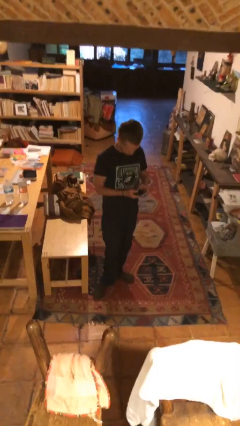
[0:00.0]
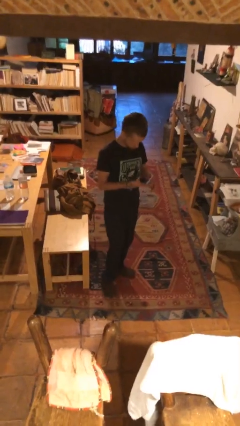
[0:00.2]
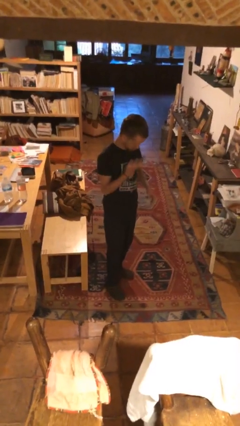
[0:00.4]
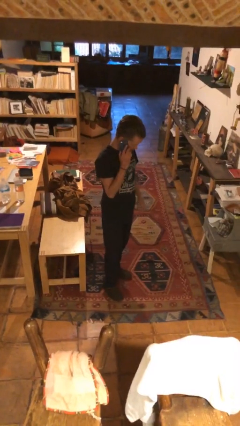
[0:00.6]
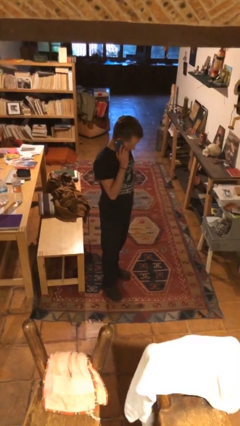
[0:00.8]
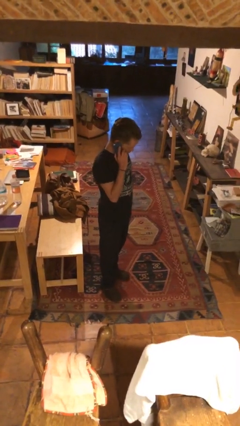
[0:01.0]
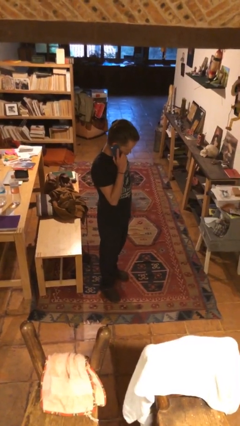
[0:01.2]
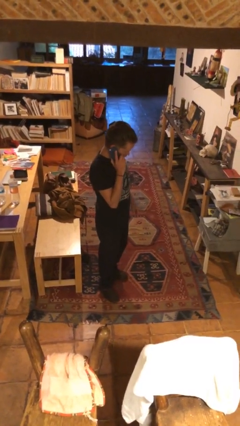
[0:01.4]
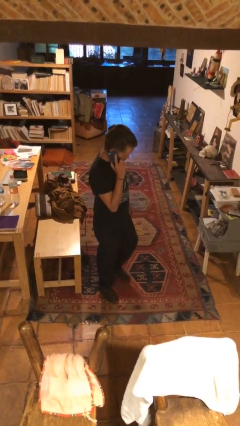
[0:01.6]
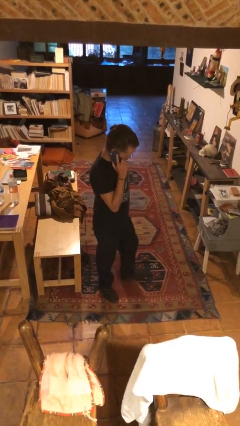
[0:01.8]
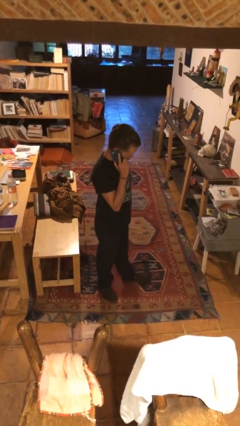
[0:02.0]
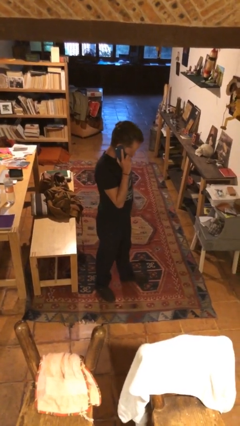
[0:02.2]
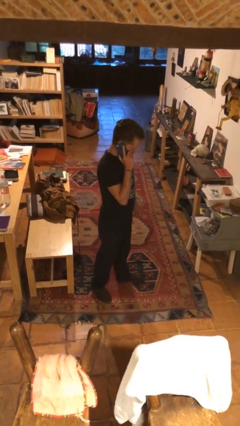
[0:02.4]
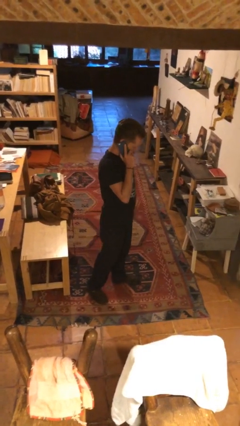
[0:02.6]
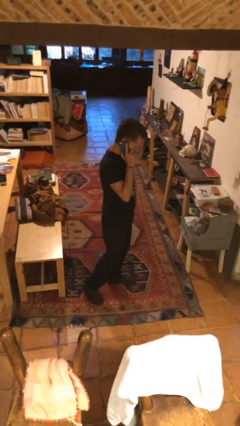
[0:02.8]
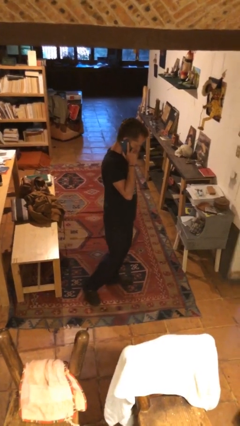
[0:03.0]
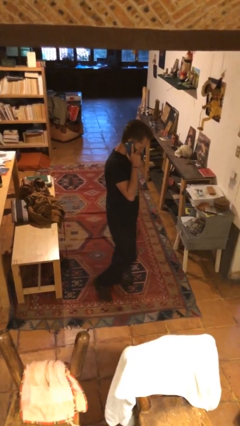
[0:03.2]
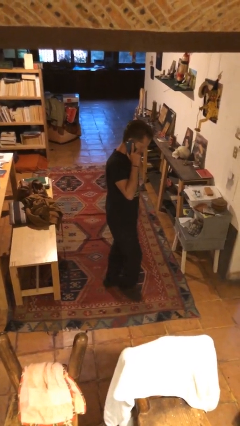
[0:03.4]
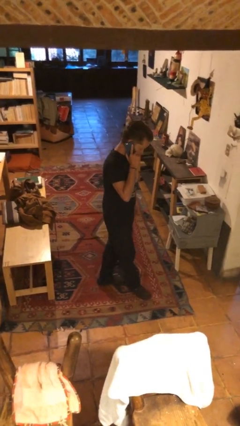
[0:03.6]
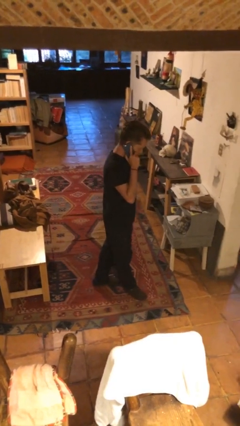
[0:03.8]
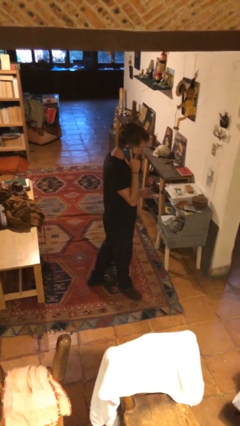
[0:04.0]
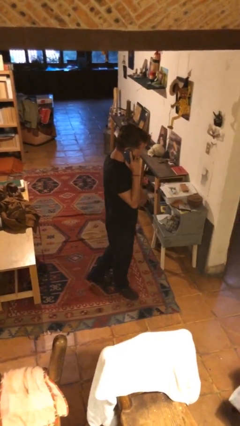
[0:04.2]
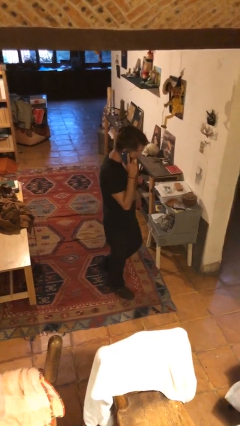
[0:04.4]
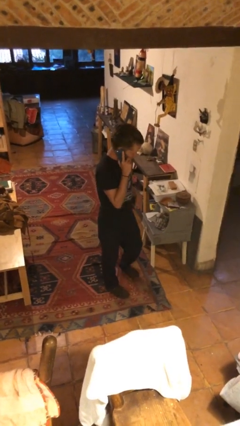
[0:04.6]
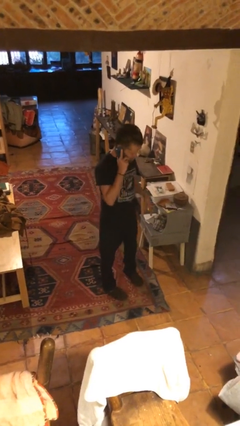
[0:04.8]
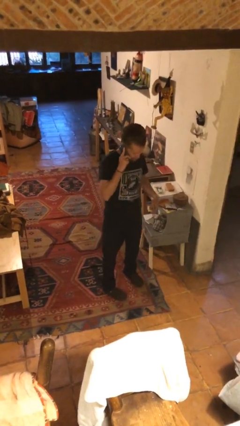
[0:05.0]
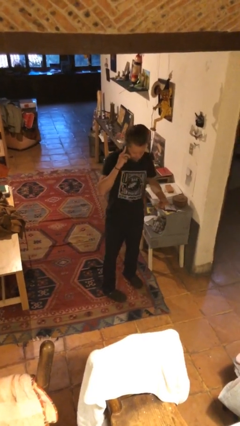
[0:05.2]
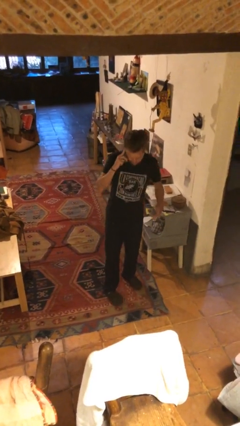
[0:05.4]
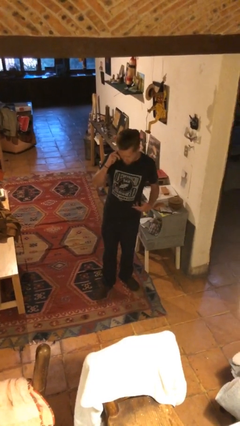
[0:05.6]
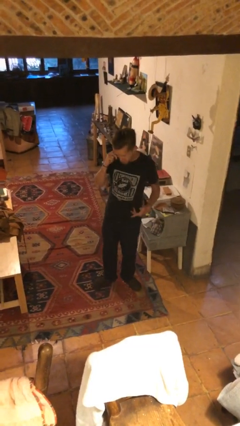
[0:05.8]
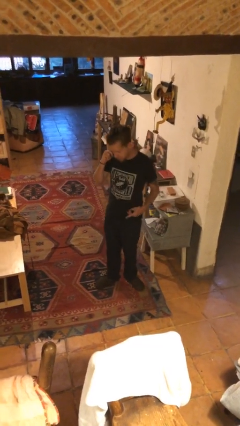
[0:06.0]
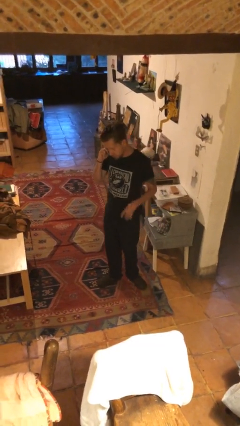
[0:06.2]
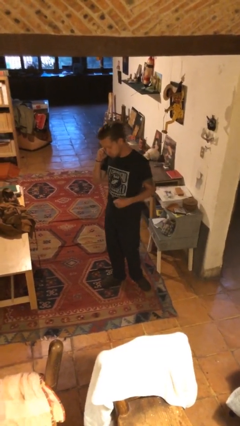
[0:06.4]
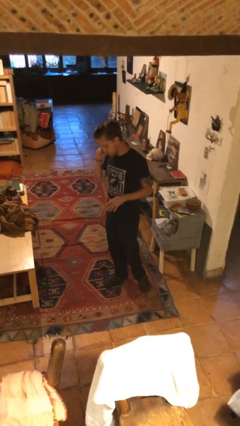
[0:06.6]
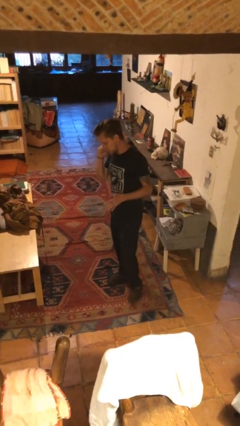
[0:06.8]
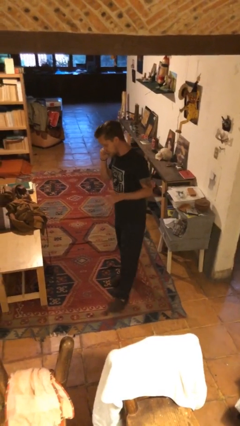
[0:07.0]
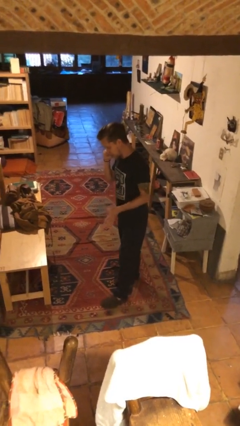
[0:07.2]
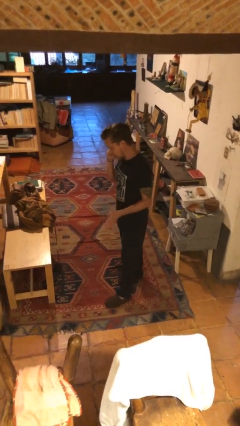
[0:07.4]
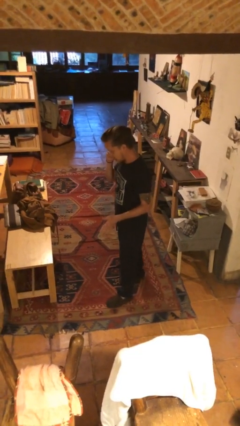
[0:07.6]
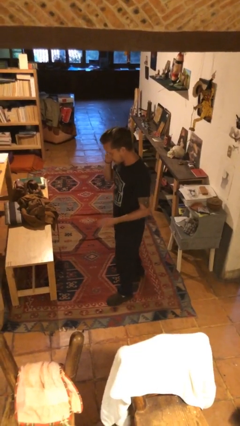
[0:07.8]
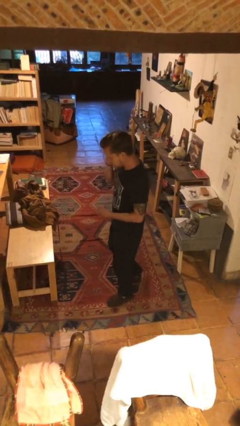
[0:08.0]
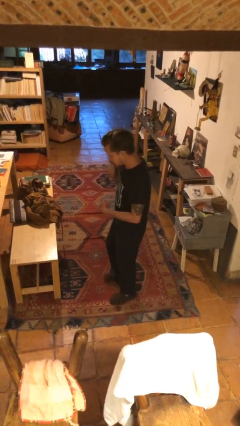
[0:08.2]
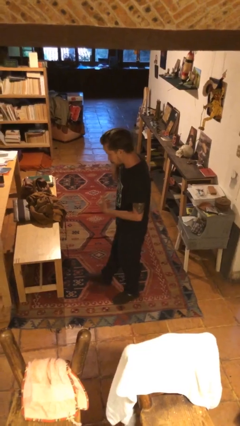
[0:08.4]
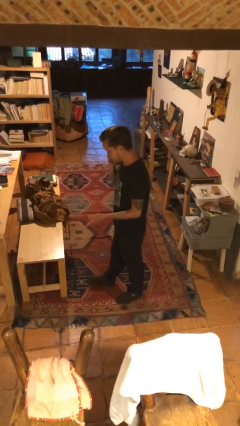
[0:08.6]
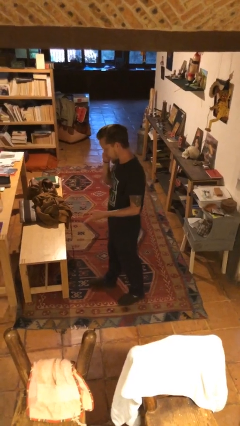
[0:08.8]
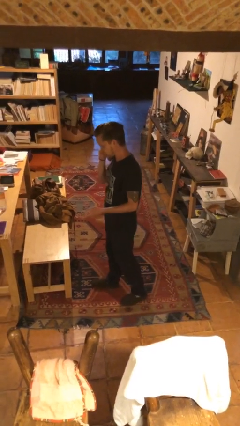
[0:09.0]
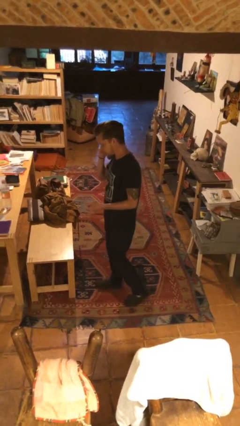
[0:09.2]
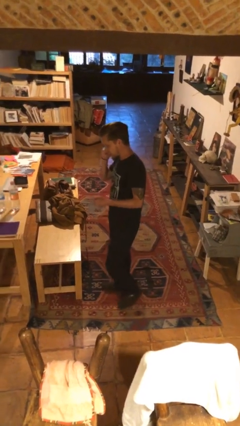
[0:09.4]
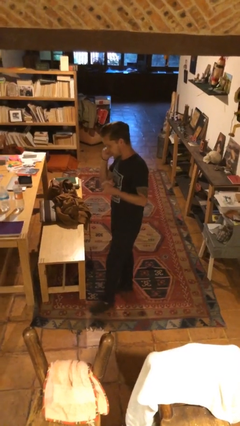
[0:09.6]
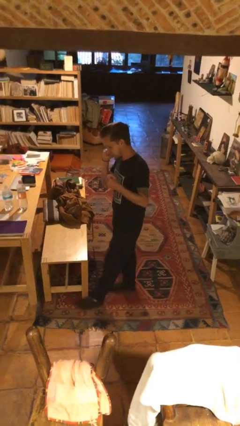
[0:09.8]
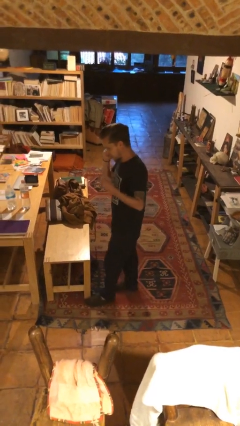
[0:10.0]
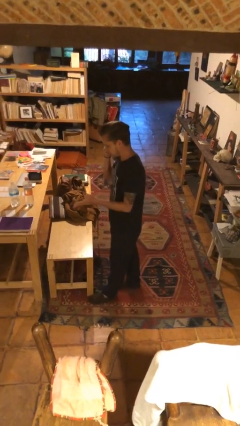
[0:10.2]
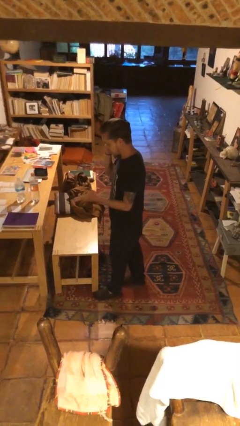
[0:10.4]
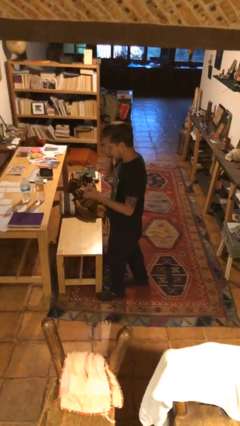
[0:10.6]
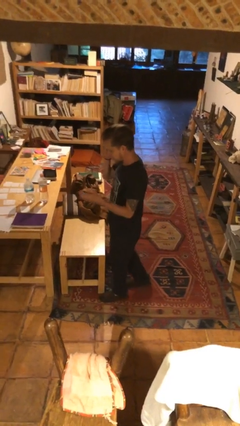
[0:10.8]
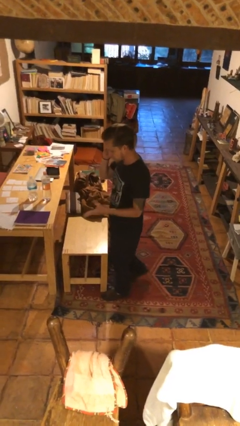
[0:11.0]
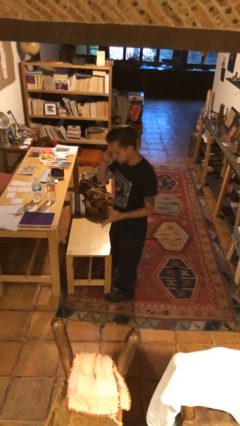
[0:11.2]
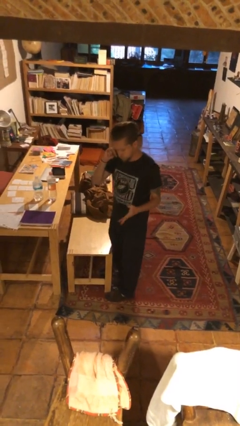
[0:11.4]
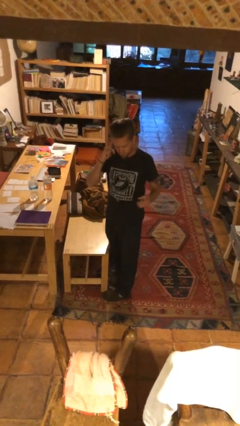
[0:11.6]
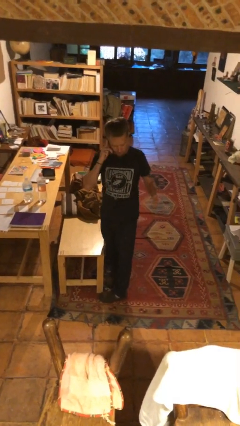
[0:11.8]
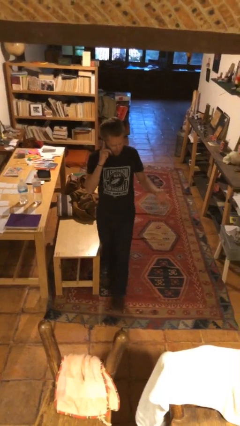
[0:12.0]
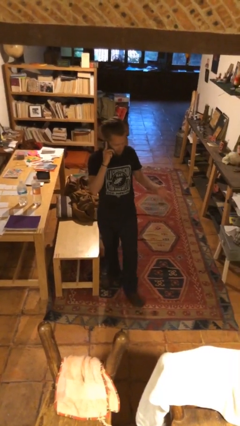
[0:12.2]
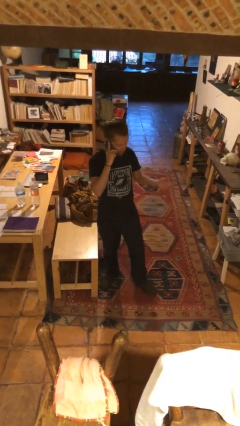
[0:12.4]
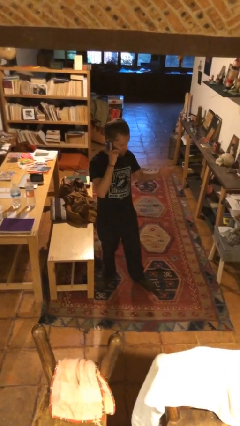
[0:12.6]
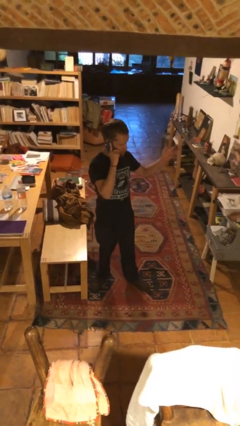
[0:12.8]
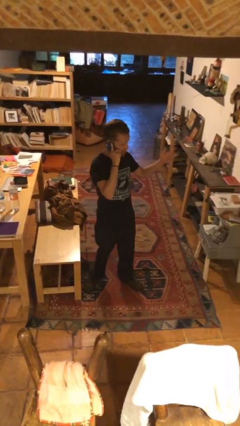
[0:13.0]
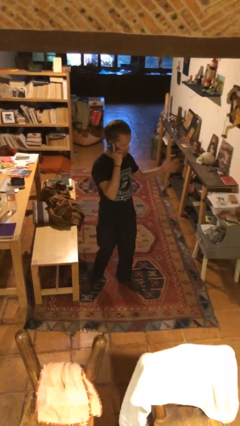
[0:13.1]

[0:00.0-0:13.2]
person talks on phone

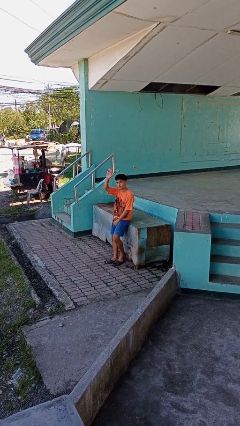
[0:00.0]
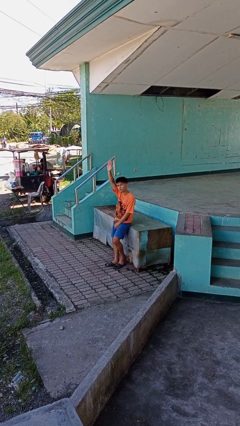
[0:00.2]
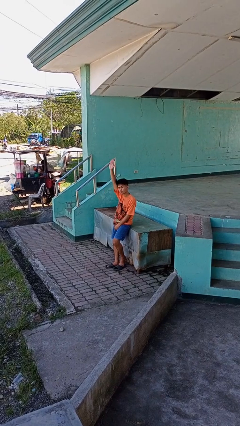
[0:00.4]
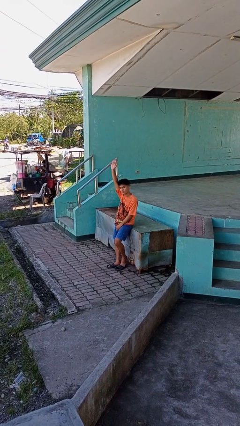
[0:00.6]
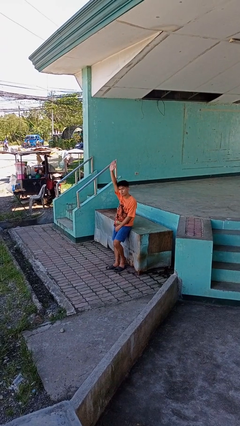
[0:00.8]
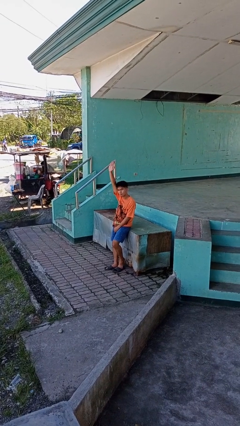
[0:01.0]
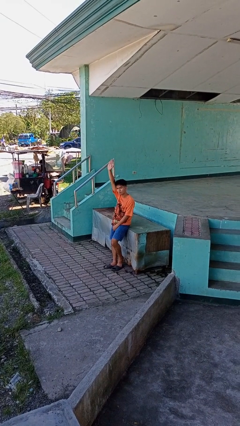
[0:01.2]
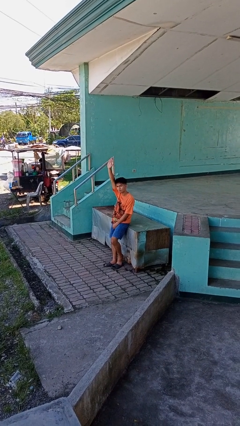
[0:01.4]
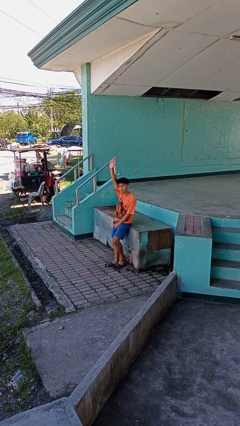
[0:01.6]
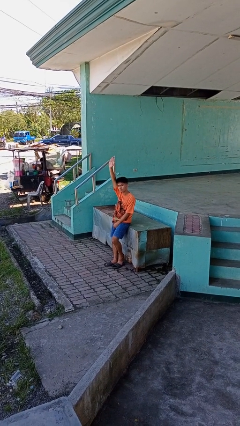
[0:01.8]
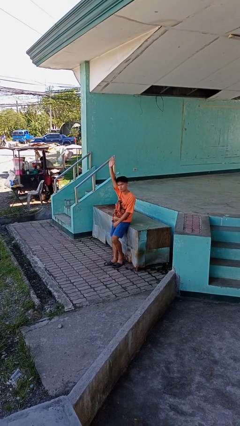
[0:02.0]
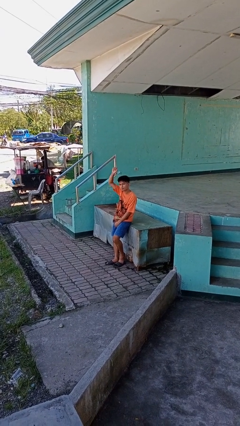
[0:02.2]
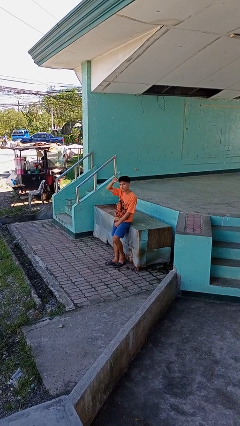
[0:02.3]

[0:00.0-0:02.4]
person gestures raise hand

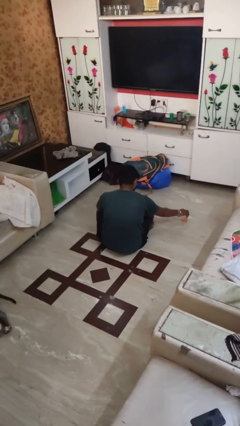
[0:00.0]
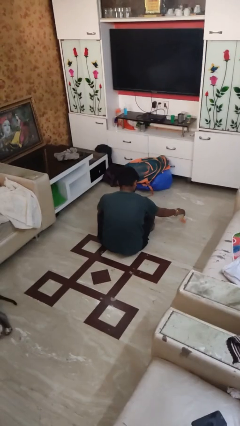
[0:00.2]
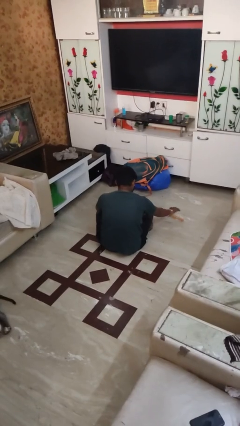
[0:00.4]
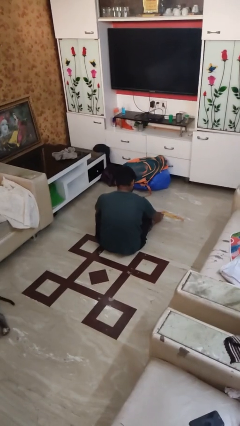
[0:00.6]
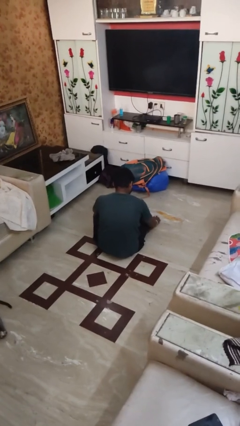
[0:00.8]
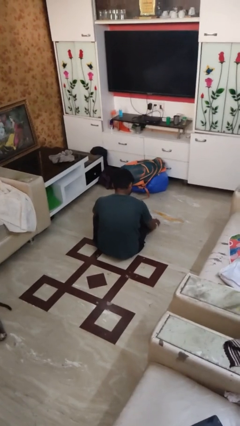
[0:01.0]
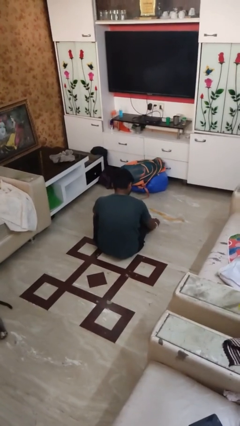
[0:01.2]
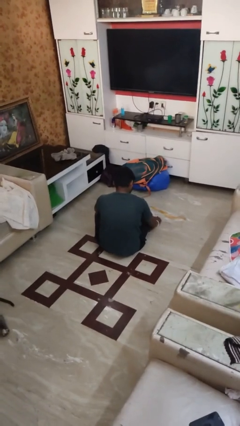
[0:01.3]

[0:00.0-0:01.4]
person spills on floor

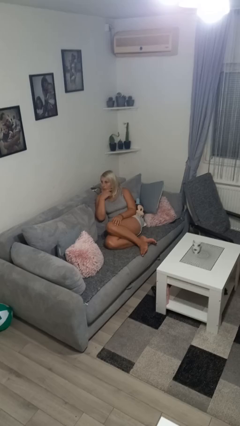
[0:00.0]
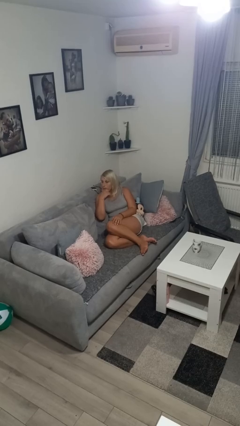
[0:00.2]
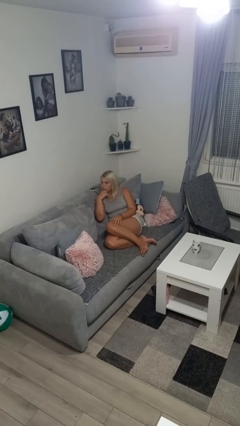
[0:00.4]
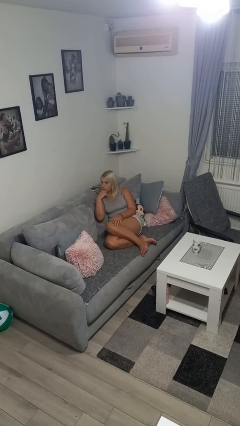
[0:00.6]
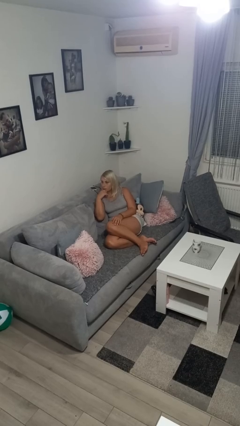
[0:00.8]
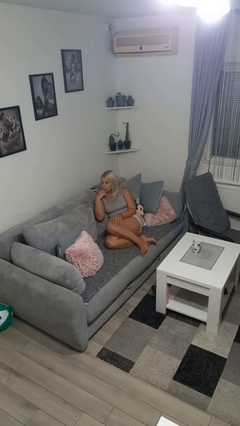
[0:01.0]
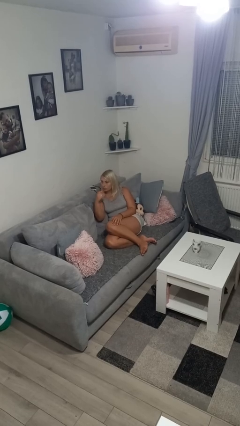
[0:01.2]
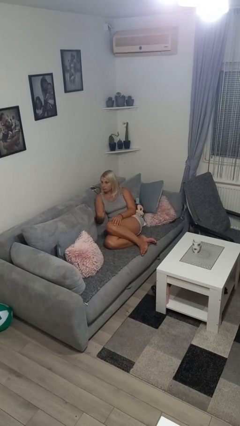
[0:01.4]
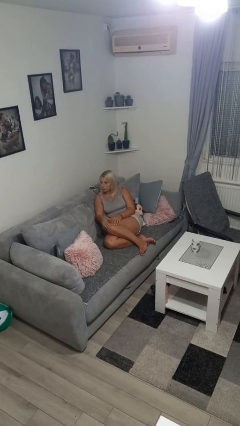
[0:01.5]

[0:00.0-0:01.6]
person strokes chin
